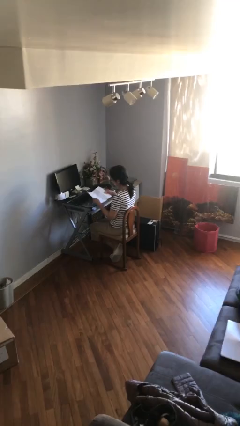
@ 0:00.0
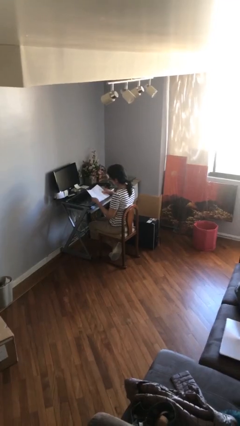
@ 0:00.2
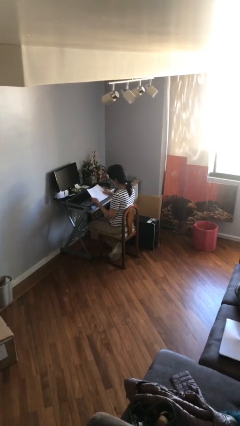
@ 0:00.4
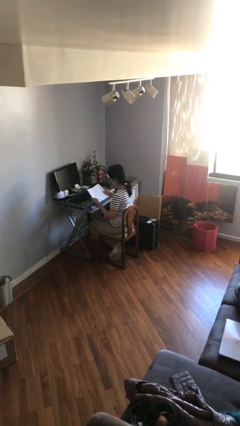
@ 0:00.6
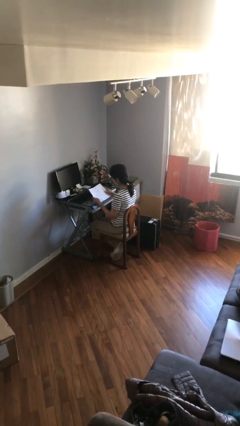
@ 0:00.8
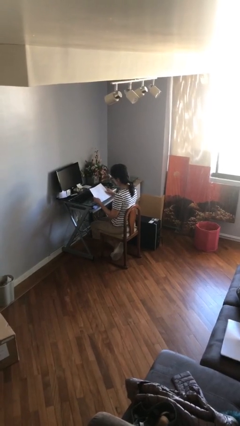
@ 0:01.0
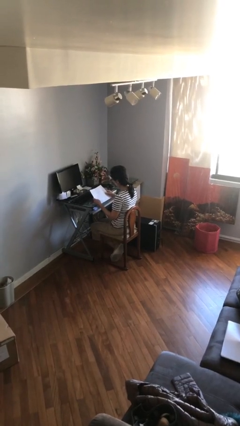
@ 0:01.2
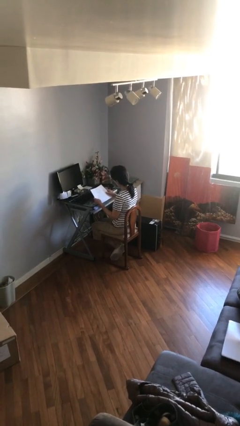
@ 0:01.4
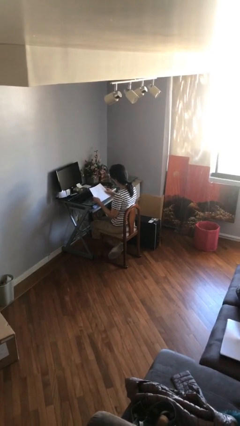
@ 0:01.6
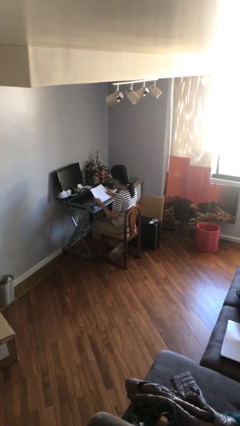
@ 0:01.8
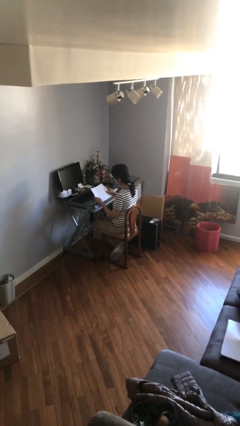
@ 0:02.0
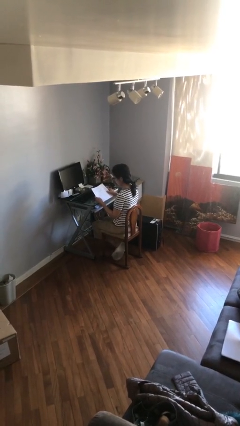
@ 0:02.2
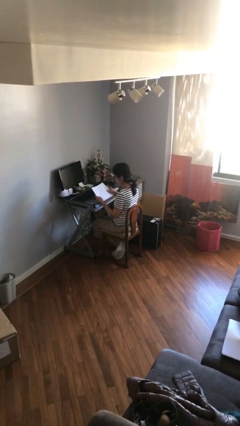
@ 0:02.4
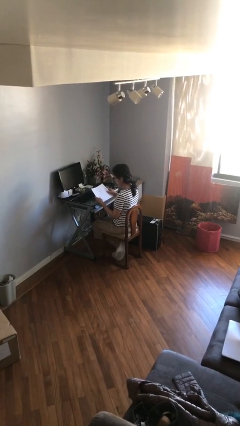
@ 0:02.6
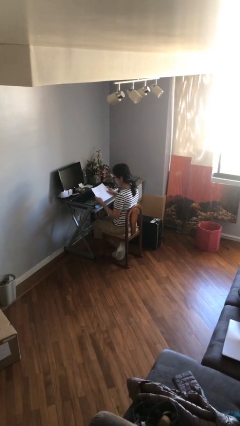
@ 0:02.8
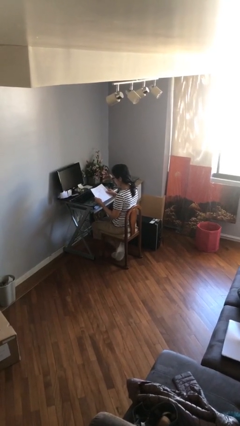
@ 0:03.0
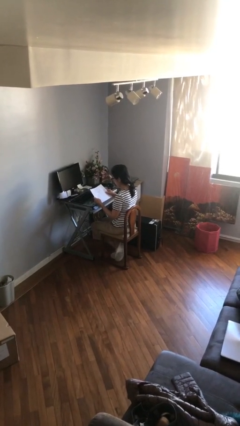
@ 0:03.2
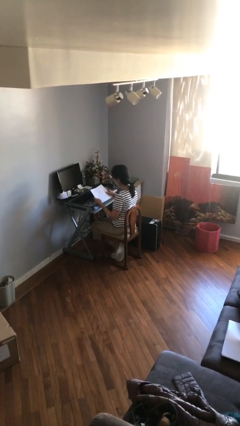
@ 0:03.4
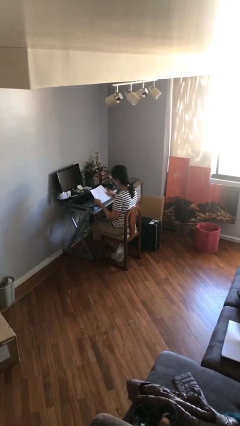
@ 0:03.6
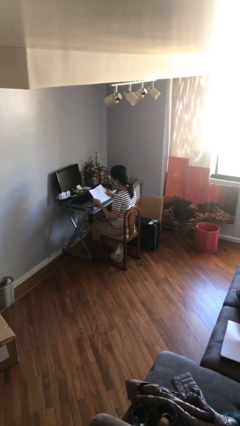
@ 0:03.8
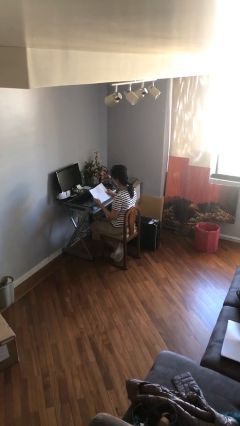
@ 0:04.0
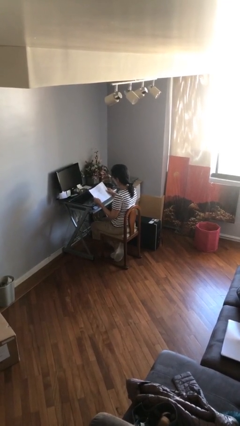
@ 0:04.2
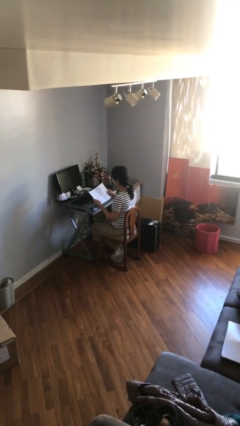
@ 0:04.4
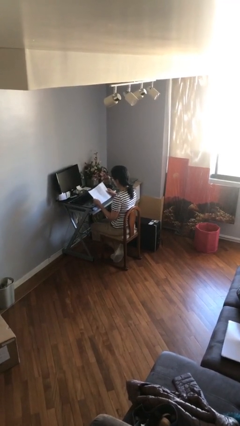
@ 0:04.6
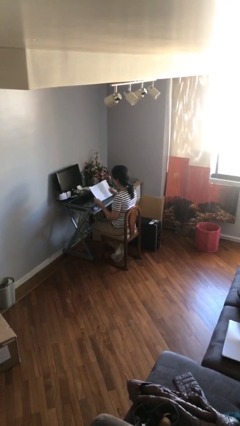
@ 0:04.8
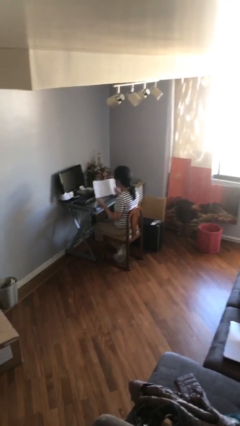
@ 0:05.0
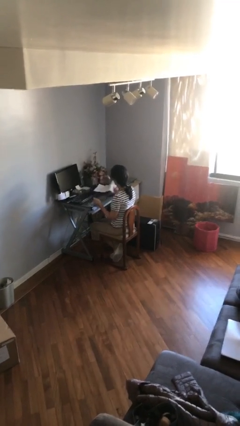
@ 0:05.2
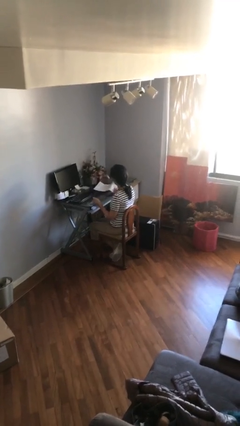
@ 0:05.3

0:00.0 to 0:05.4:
person reads document

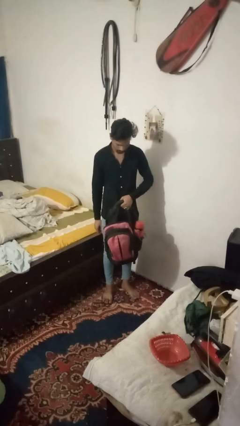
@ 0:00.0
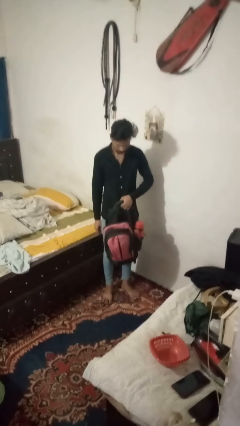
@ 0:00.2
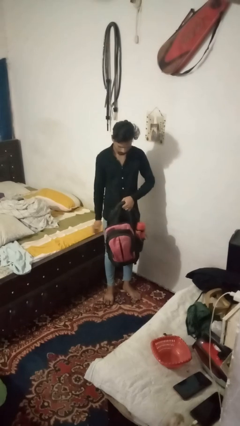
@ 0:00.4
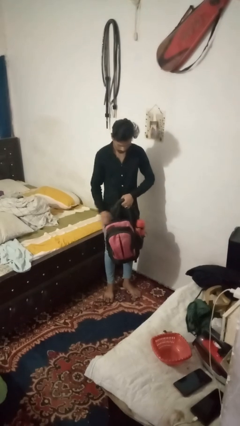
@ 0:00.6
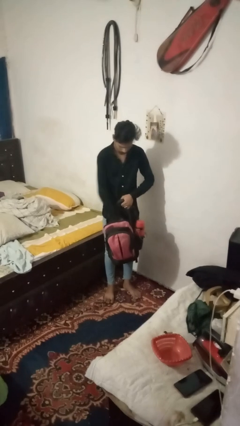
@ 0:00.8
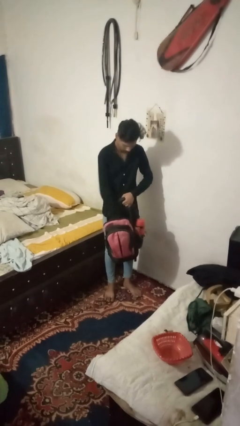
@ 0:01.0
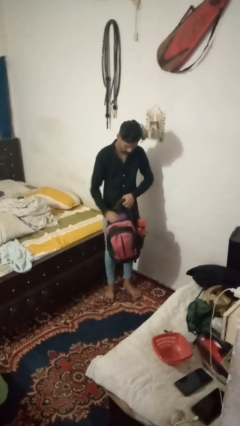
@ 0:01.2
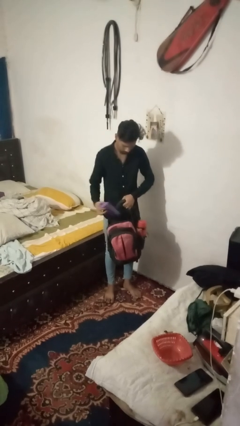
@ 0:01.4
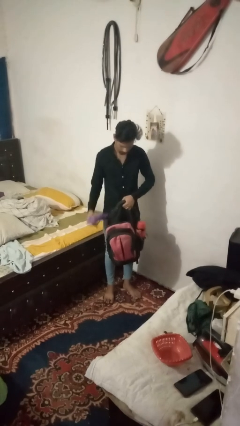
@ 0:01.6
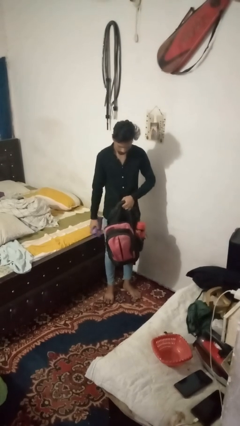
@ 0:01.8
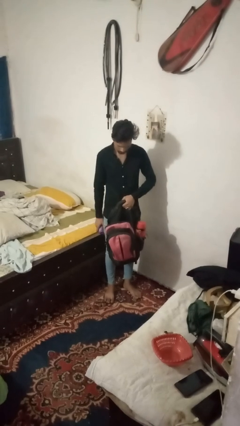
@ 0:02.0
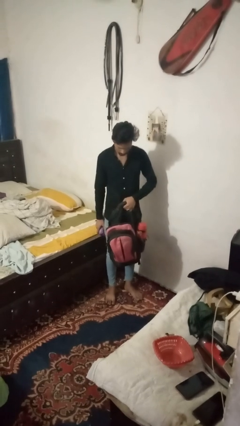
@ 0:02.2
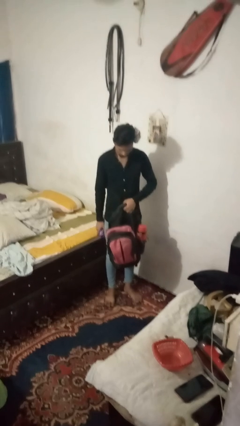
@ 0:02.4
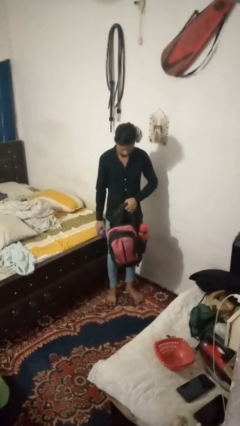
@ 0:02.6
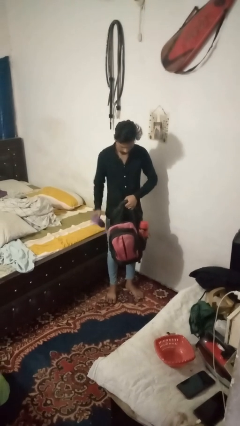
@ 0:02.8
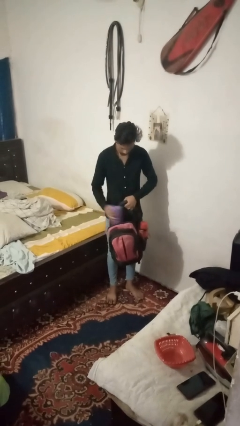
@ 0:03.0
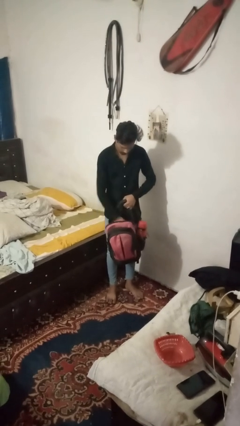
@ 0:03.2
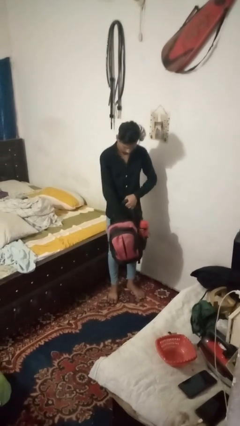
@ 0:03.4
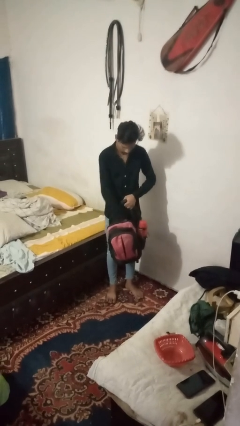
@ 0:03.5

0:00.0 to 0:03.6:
person takes object from bag

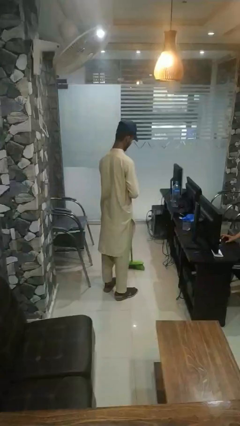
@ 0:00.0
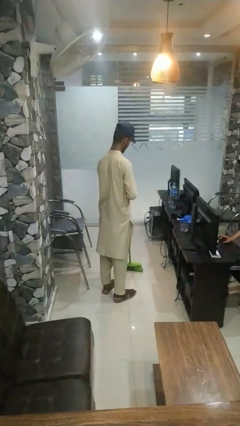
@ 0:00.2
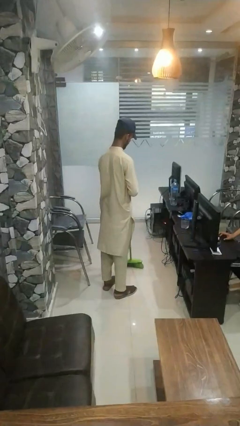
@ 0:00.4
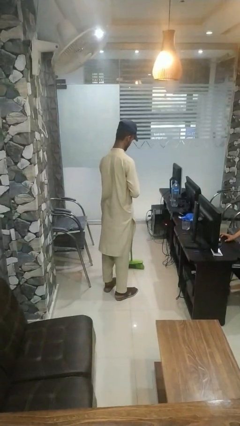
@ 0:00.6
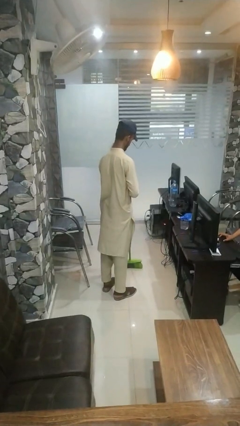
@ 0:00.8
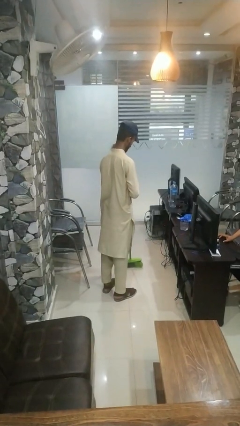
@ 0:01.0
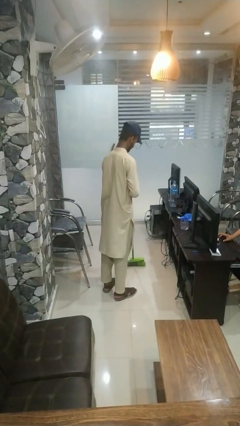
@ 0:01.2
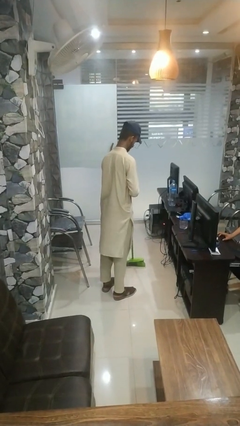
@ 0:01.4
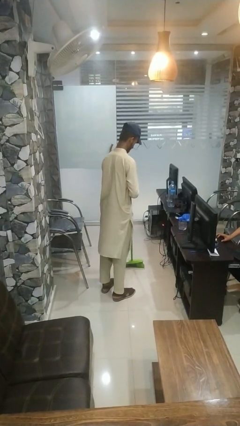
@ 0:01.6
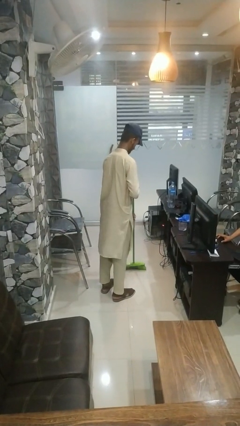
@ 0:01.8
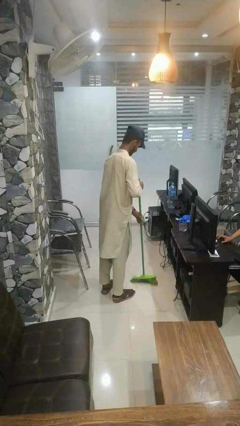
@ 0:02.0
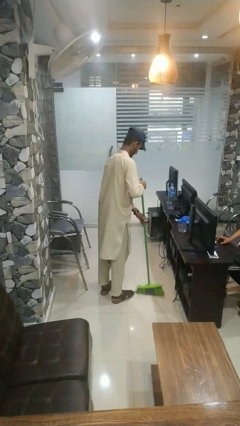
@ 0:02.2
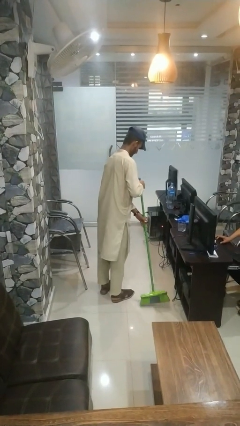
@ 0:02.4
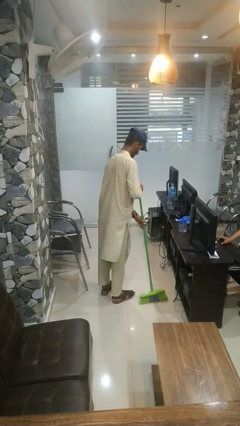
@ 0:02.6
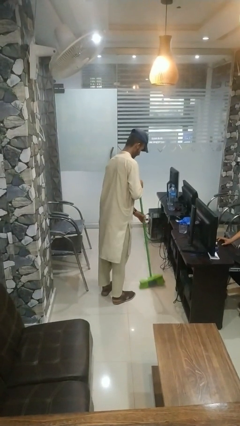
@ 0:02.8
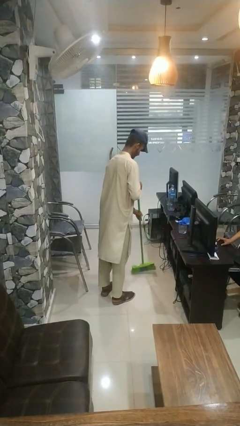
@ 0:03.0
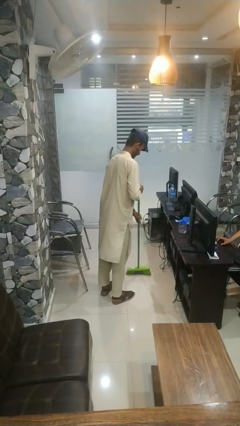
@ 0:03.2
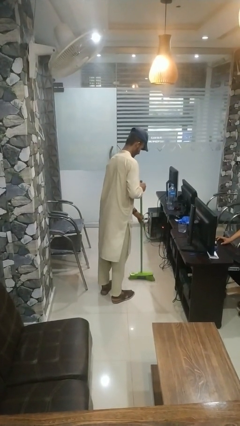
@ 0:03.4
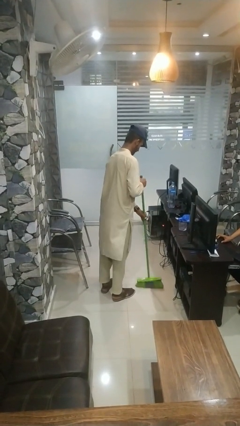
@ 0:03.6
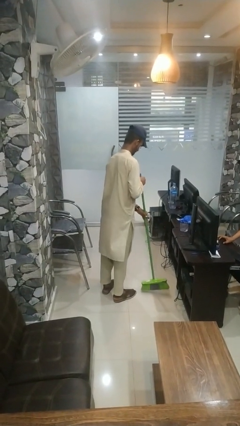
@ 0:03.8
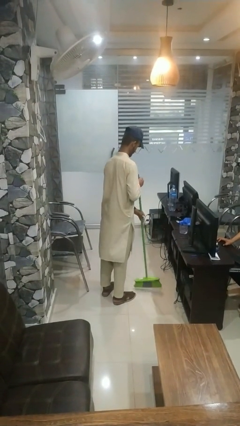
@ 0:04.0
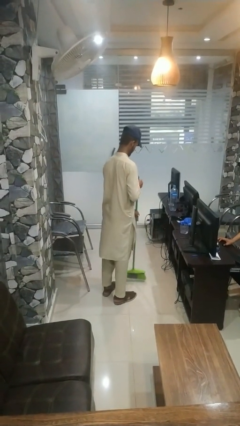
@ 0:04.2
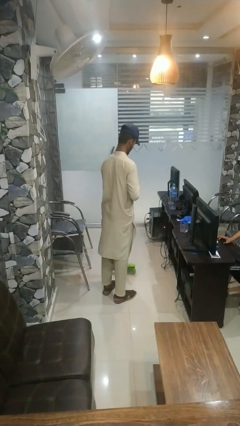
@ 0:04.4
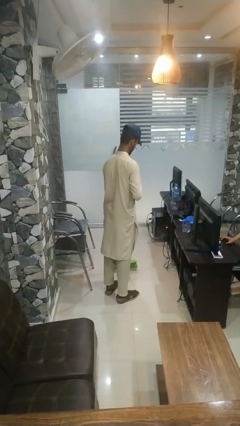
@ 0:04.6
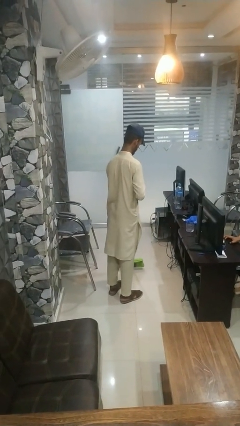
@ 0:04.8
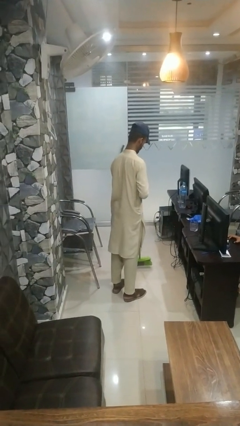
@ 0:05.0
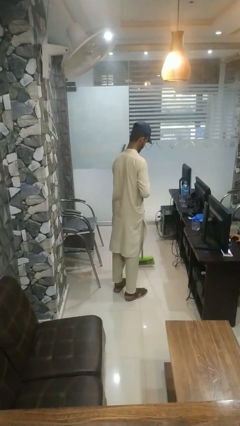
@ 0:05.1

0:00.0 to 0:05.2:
person sweeps floor

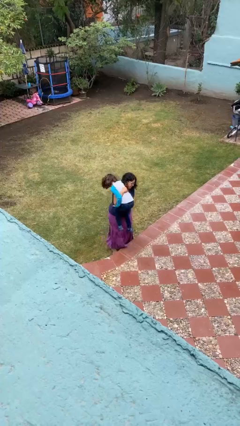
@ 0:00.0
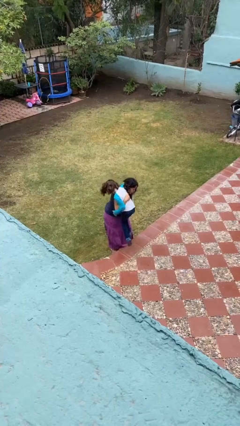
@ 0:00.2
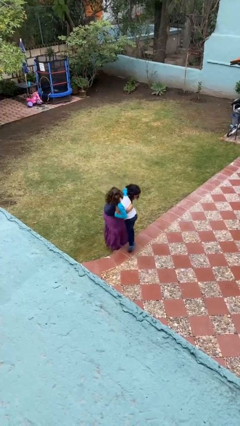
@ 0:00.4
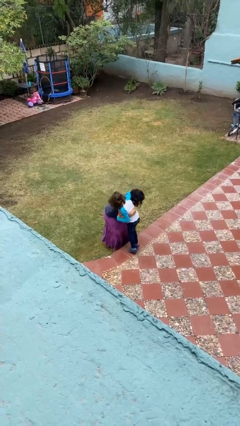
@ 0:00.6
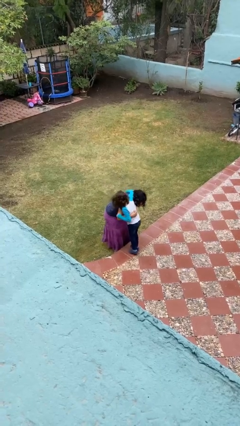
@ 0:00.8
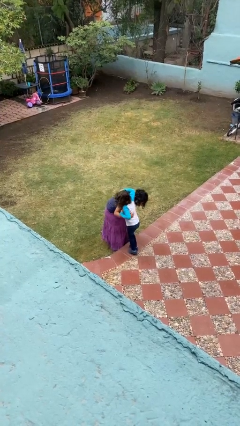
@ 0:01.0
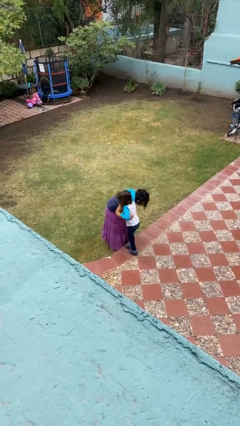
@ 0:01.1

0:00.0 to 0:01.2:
person puts down person

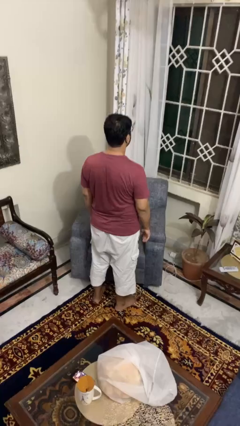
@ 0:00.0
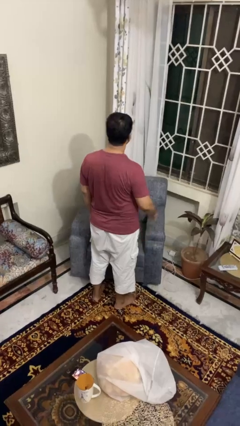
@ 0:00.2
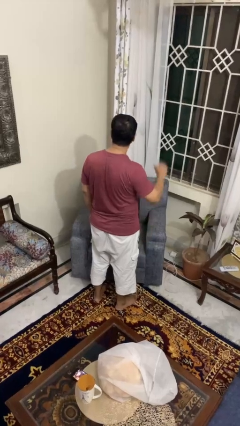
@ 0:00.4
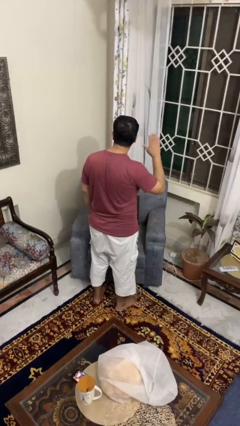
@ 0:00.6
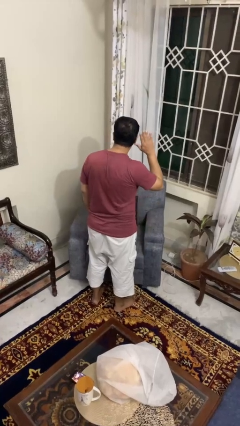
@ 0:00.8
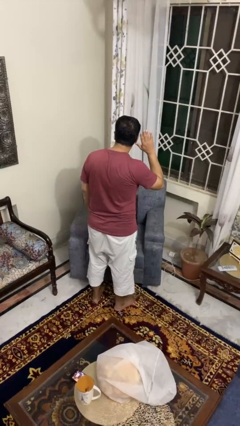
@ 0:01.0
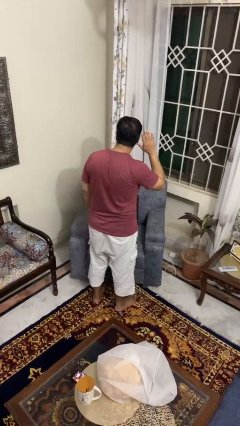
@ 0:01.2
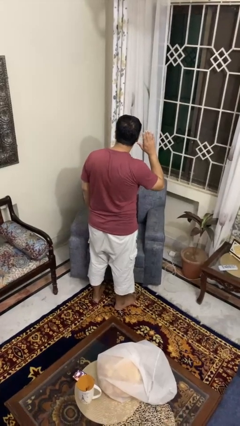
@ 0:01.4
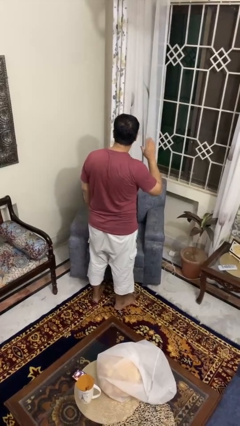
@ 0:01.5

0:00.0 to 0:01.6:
person gestures listen closely

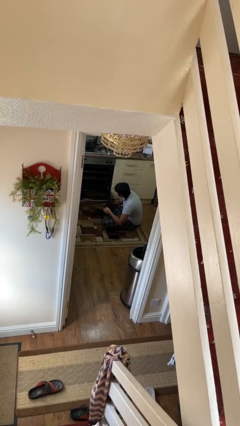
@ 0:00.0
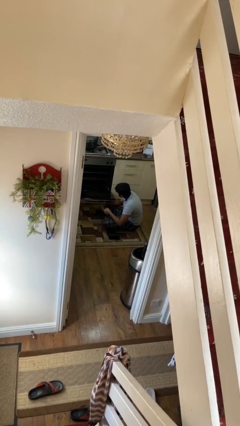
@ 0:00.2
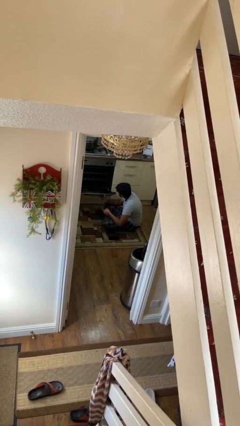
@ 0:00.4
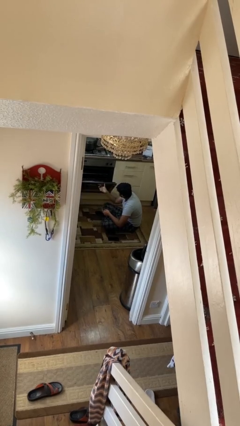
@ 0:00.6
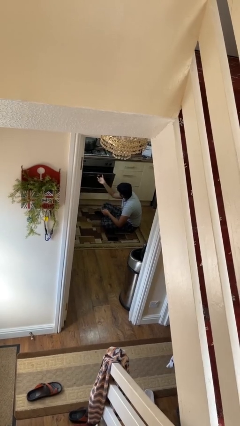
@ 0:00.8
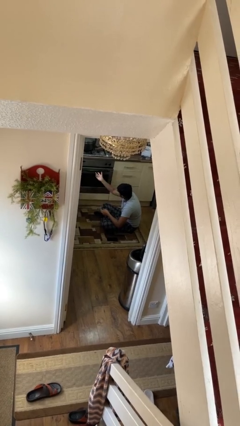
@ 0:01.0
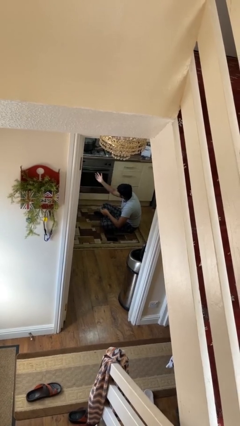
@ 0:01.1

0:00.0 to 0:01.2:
person closes oven door
